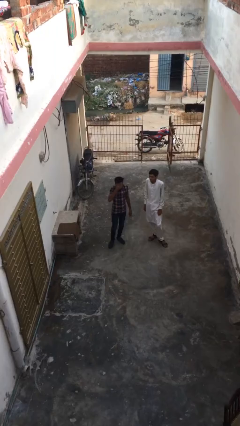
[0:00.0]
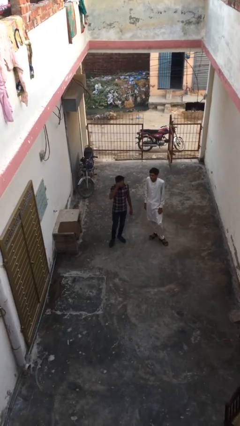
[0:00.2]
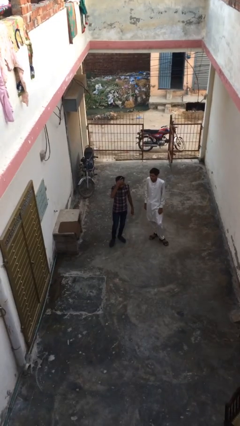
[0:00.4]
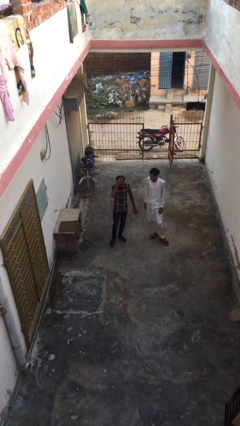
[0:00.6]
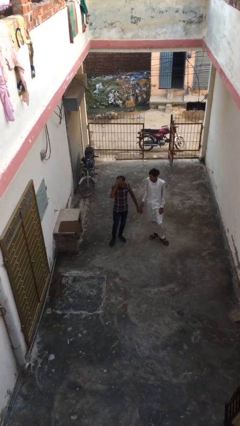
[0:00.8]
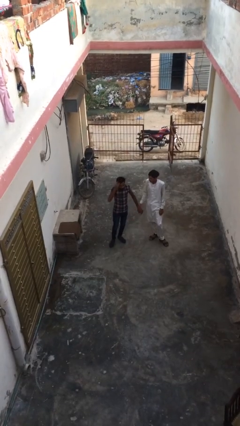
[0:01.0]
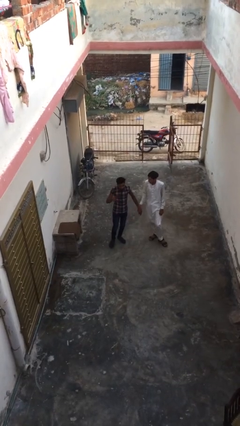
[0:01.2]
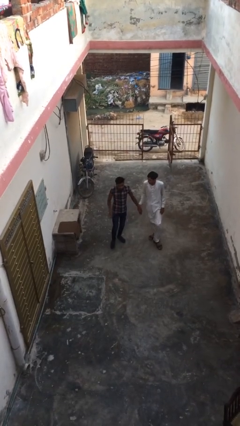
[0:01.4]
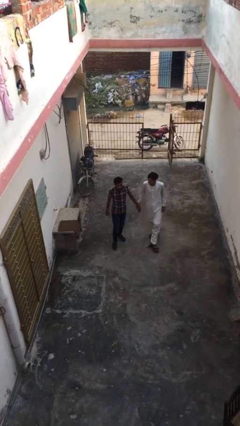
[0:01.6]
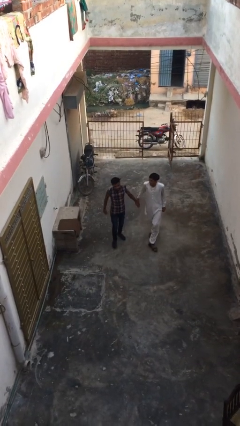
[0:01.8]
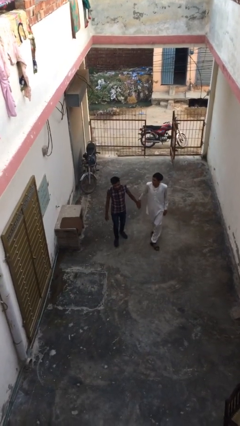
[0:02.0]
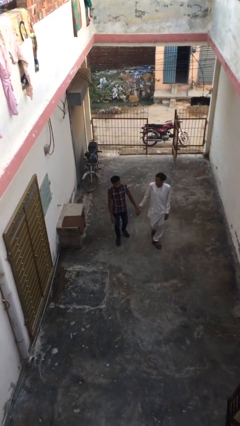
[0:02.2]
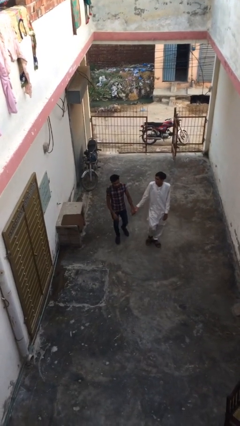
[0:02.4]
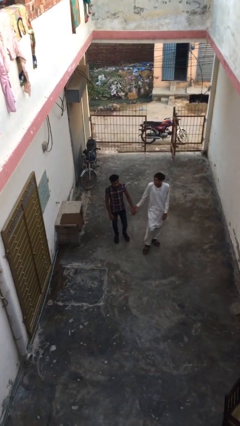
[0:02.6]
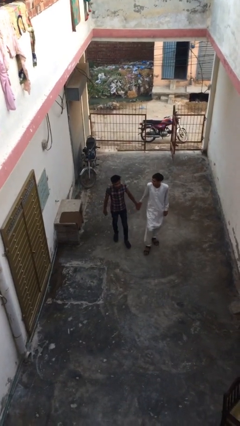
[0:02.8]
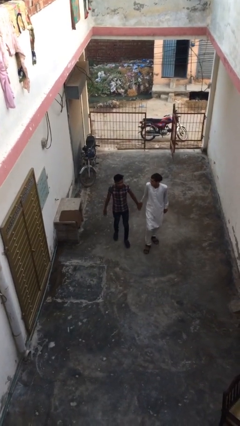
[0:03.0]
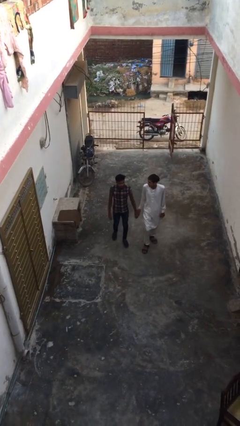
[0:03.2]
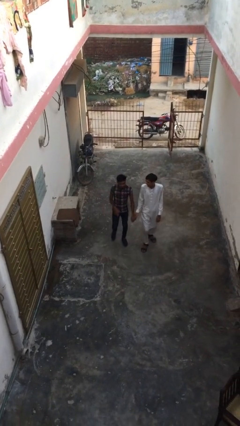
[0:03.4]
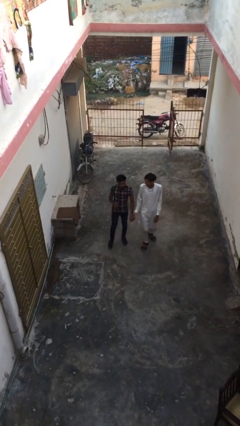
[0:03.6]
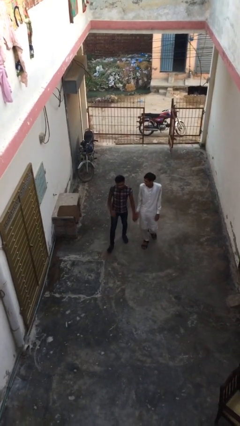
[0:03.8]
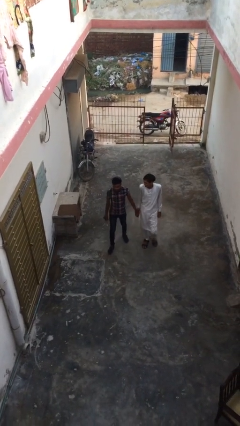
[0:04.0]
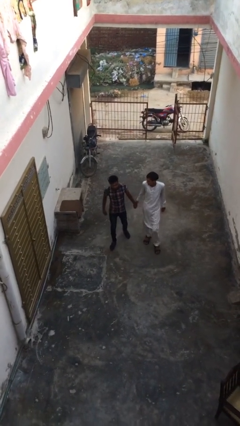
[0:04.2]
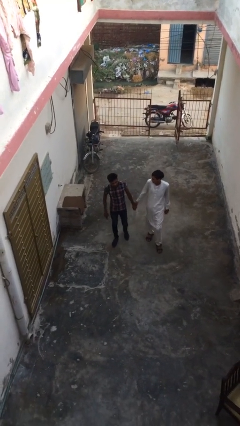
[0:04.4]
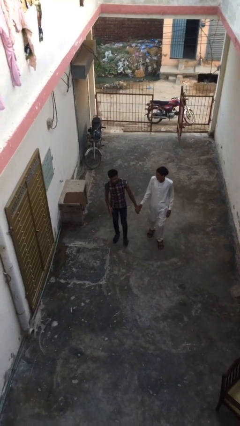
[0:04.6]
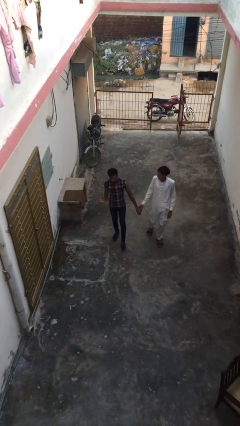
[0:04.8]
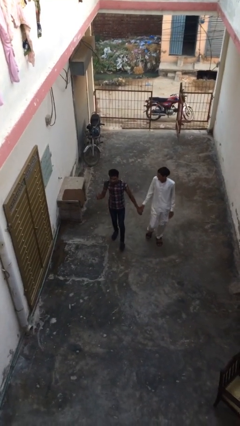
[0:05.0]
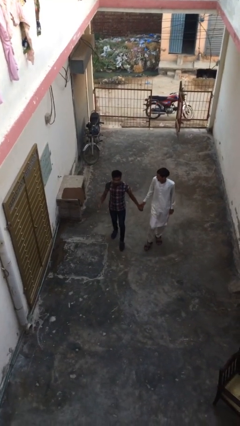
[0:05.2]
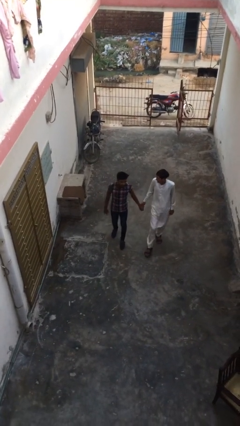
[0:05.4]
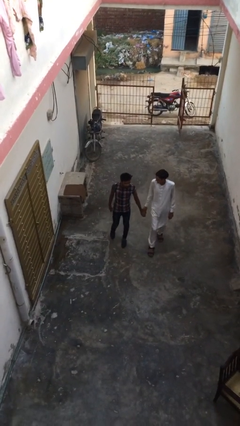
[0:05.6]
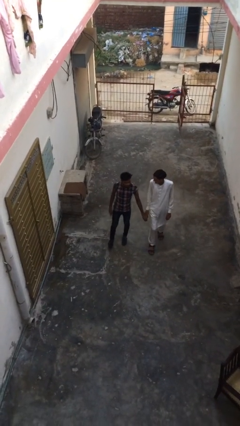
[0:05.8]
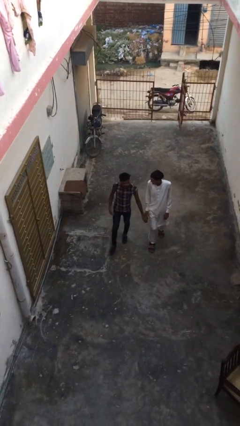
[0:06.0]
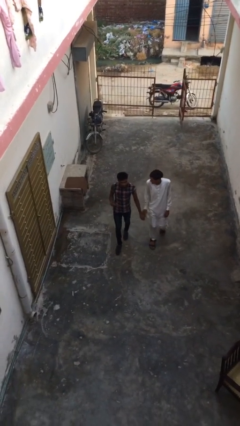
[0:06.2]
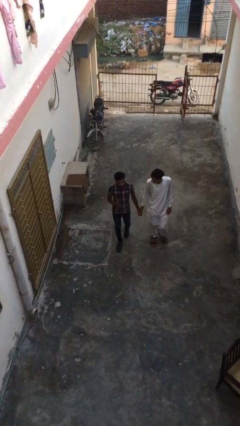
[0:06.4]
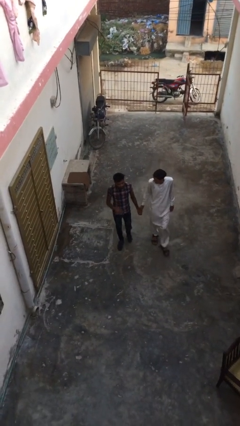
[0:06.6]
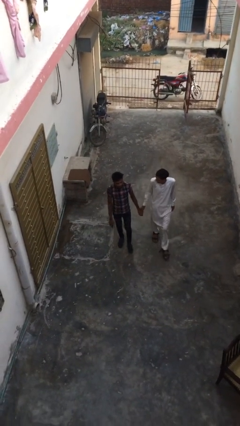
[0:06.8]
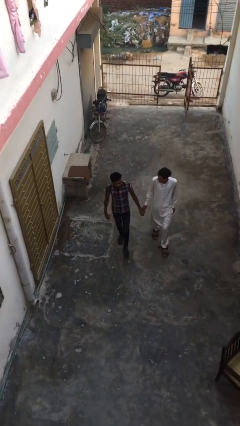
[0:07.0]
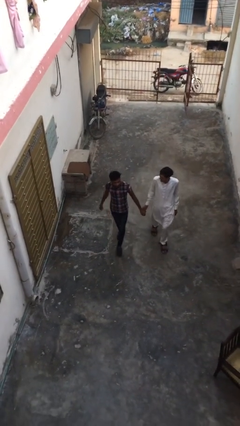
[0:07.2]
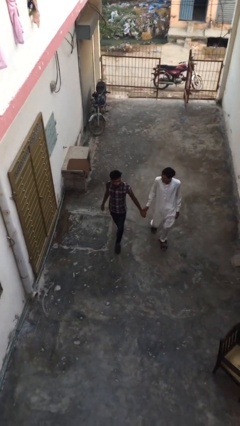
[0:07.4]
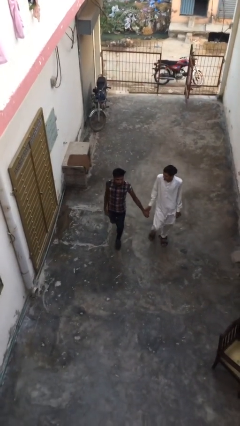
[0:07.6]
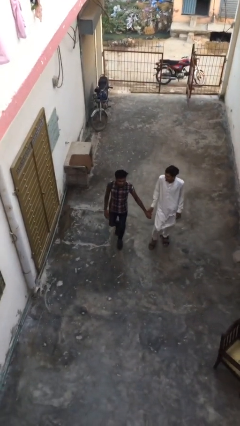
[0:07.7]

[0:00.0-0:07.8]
person holds hand

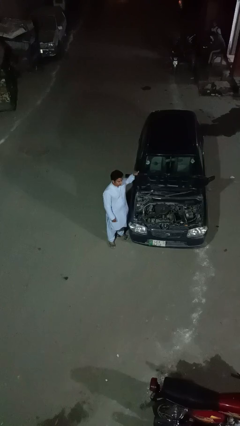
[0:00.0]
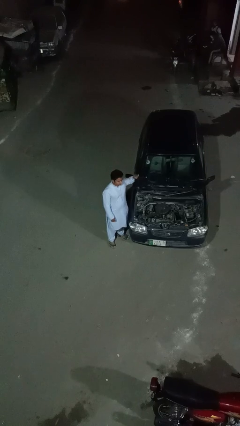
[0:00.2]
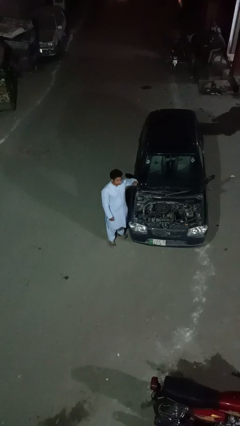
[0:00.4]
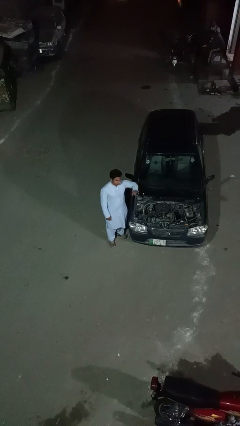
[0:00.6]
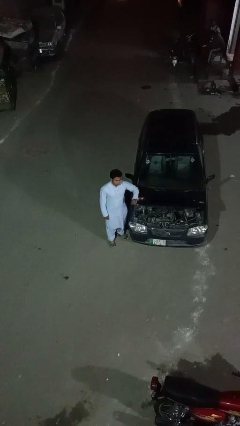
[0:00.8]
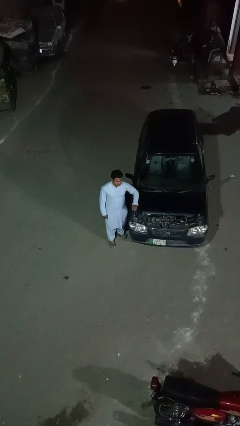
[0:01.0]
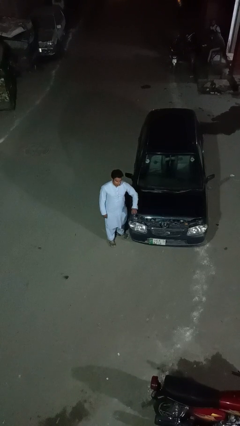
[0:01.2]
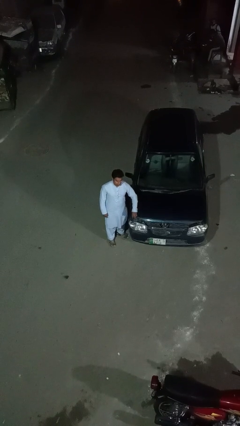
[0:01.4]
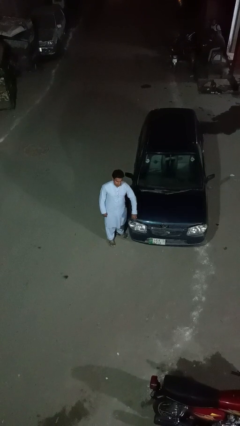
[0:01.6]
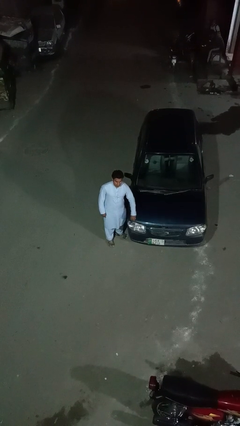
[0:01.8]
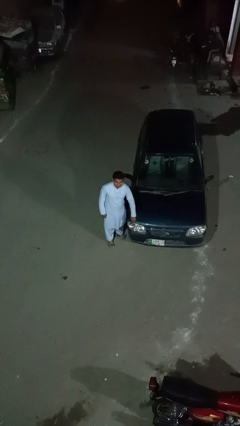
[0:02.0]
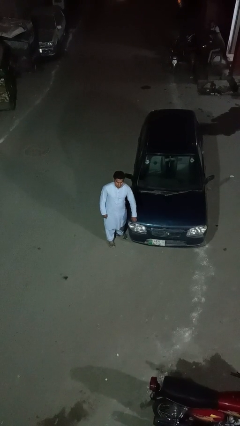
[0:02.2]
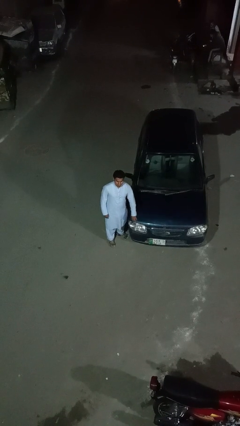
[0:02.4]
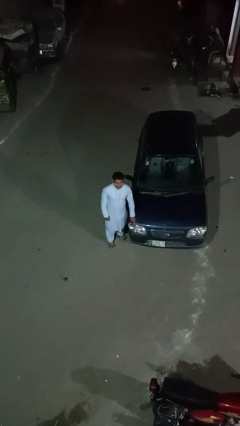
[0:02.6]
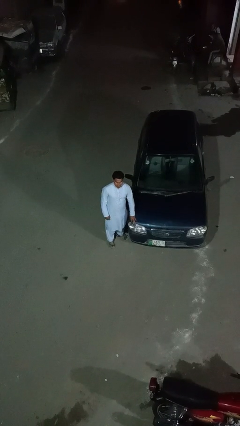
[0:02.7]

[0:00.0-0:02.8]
person closes car hood

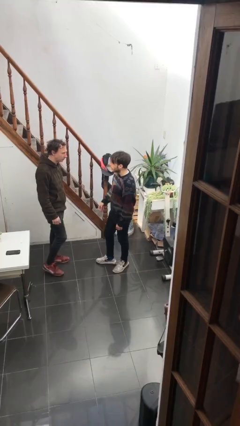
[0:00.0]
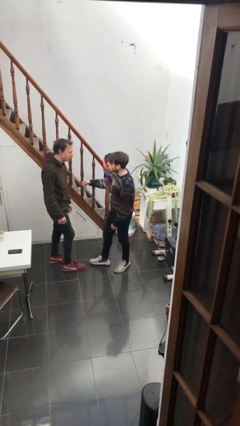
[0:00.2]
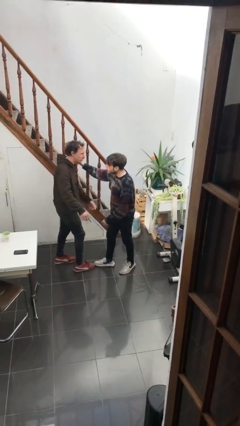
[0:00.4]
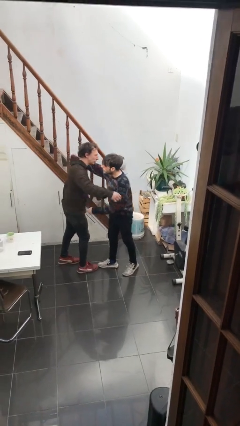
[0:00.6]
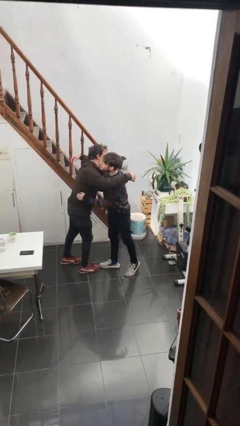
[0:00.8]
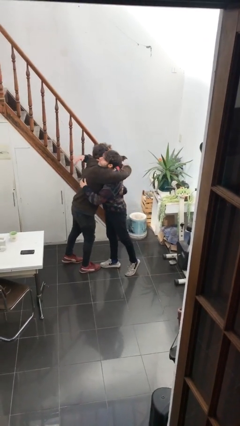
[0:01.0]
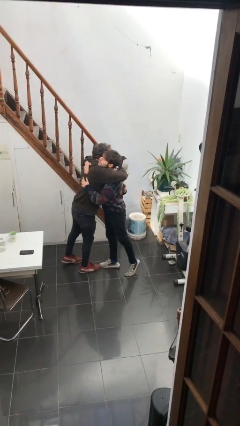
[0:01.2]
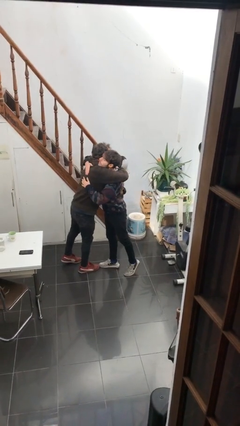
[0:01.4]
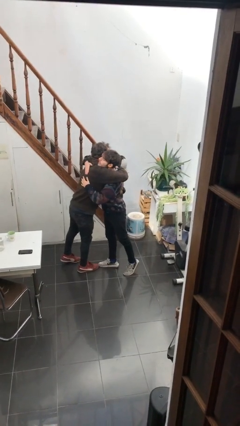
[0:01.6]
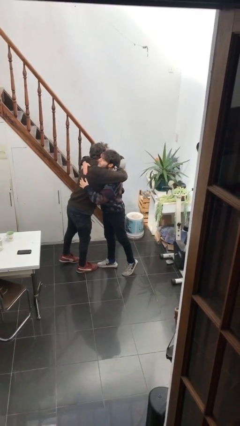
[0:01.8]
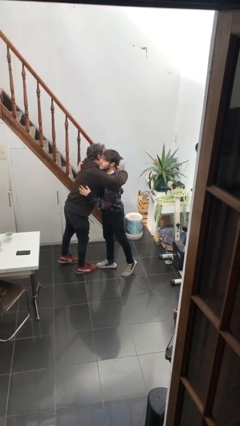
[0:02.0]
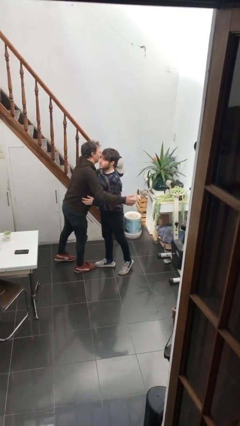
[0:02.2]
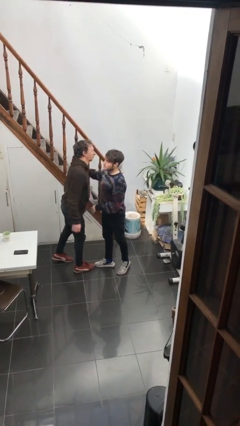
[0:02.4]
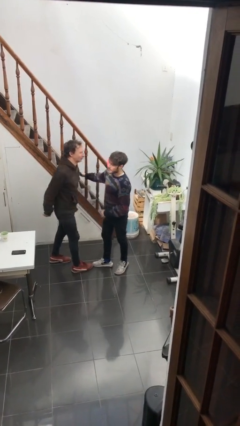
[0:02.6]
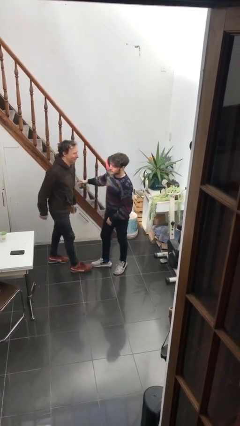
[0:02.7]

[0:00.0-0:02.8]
person embraces person

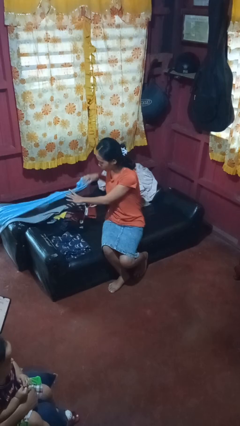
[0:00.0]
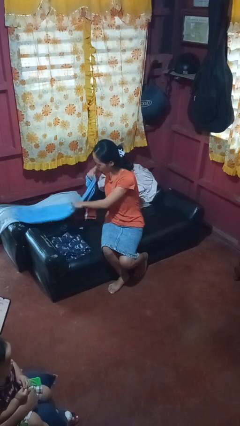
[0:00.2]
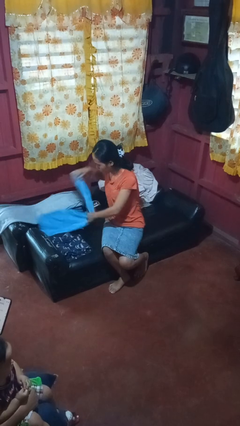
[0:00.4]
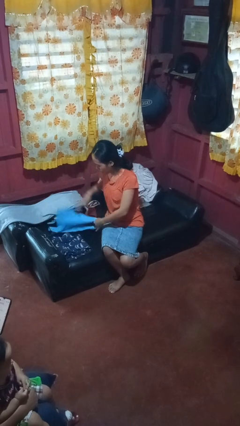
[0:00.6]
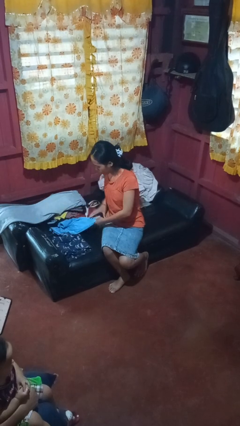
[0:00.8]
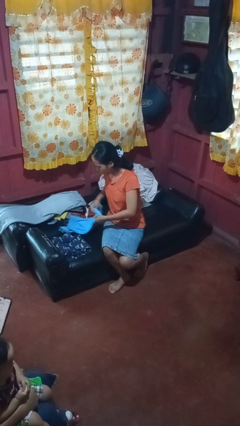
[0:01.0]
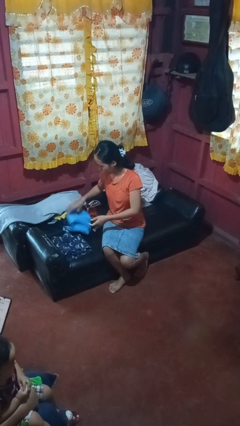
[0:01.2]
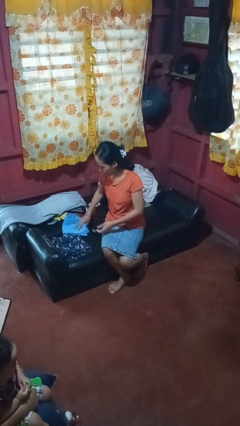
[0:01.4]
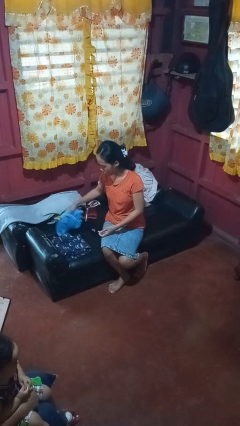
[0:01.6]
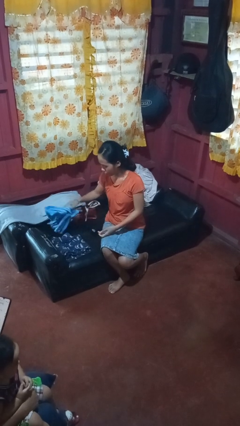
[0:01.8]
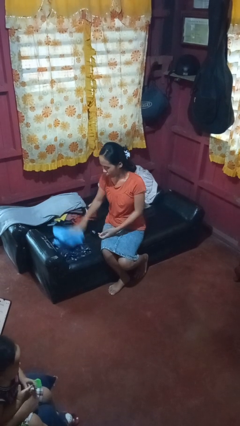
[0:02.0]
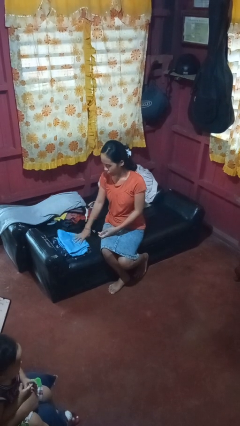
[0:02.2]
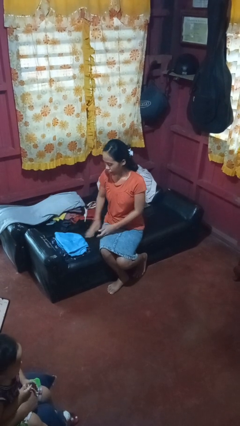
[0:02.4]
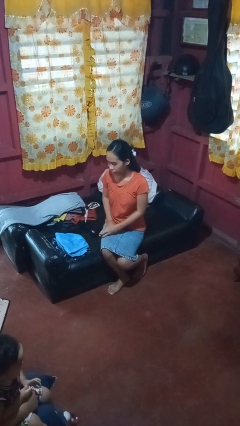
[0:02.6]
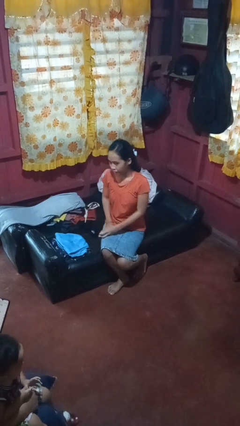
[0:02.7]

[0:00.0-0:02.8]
person folds pants

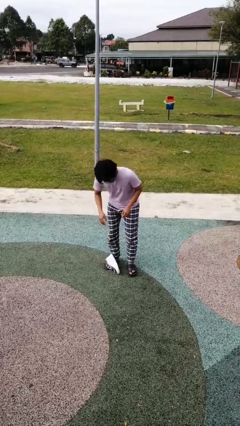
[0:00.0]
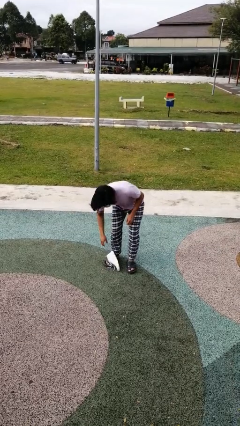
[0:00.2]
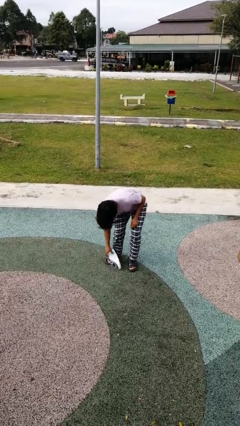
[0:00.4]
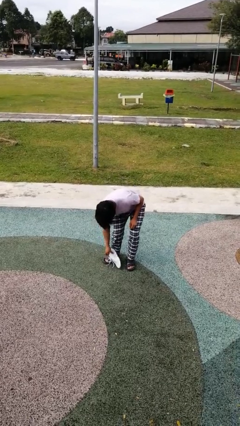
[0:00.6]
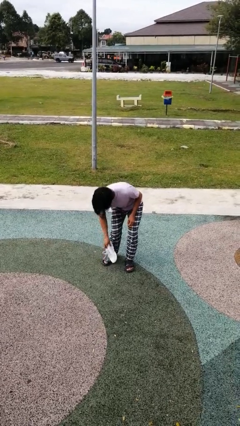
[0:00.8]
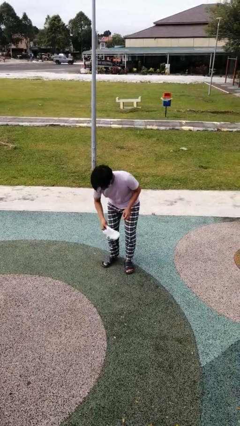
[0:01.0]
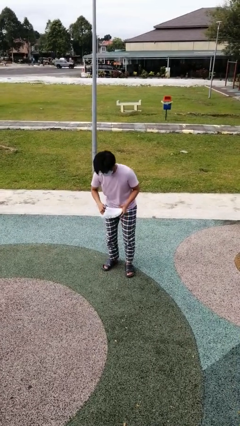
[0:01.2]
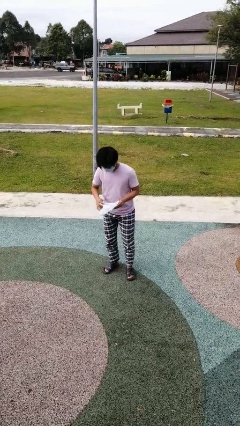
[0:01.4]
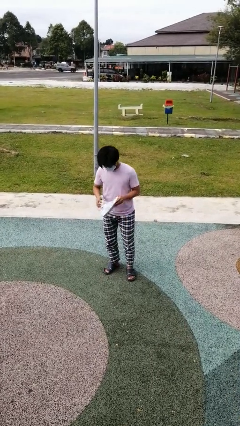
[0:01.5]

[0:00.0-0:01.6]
person picks up object from floor

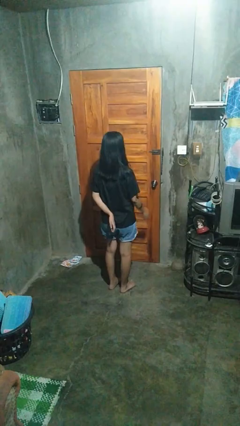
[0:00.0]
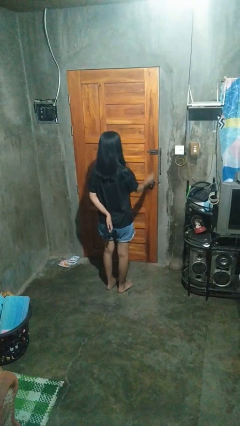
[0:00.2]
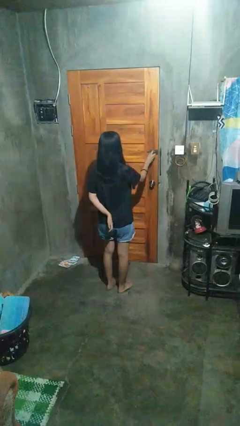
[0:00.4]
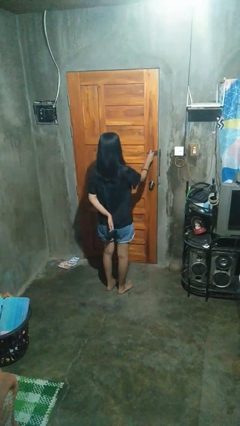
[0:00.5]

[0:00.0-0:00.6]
person locks door with keys
